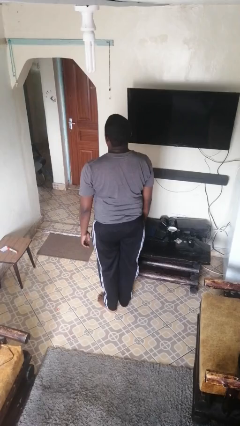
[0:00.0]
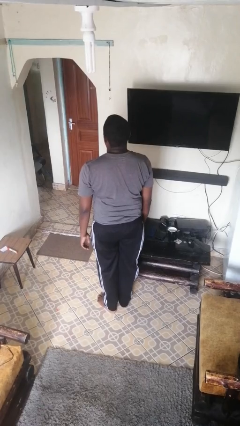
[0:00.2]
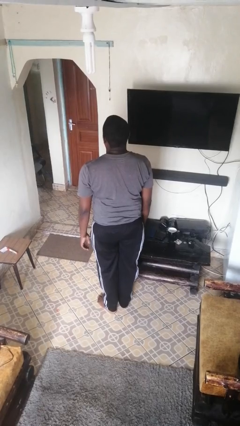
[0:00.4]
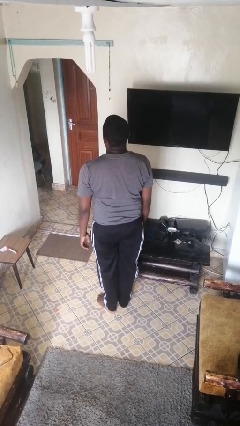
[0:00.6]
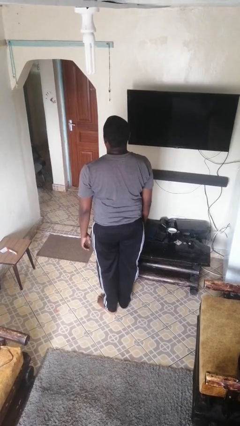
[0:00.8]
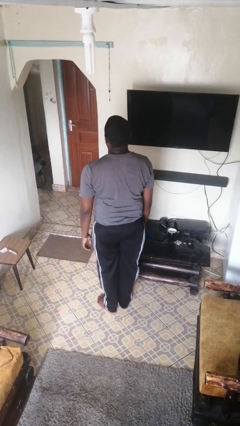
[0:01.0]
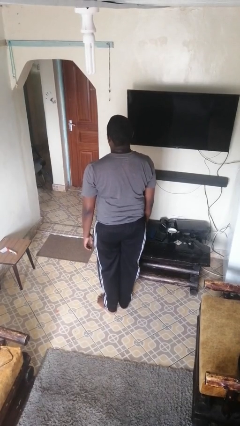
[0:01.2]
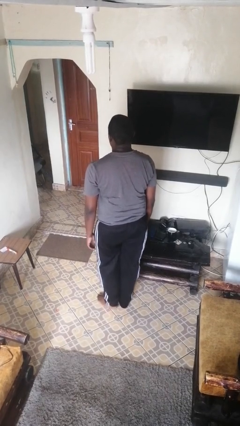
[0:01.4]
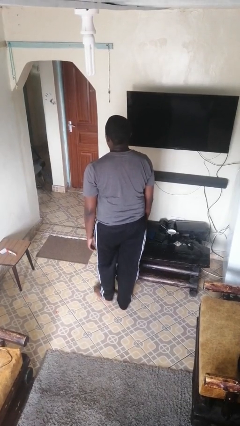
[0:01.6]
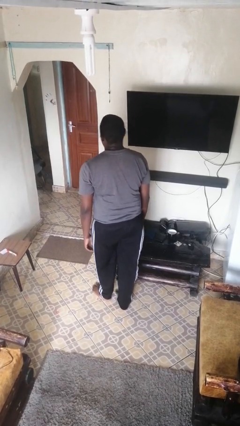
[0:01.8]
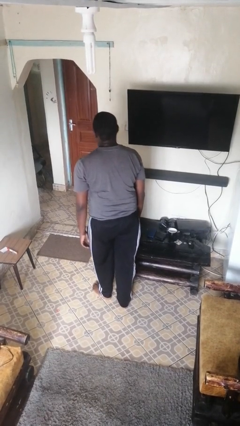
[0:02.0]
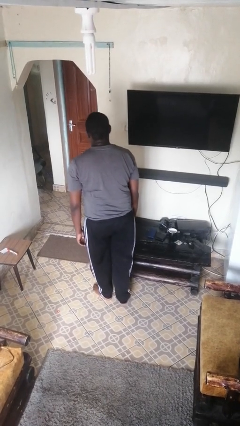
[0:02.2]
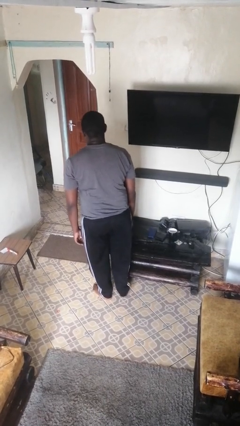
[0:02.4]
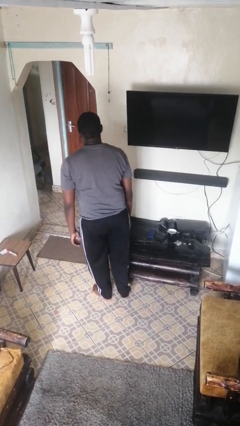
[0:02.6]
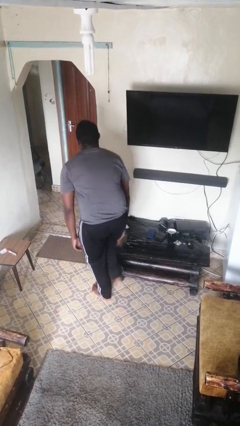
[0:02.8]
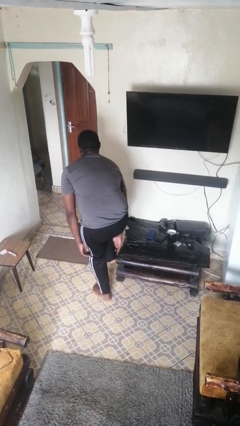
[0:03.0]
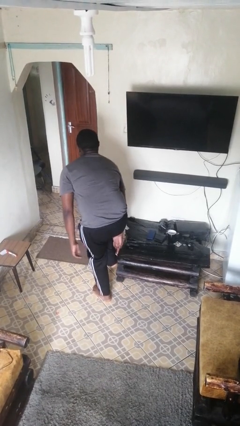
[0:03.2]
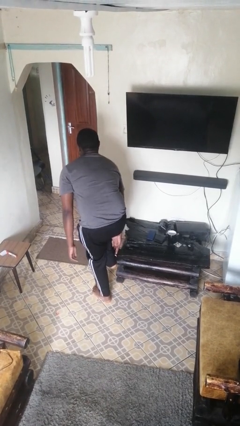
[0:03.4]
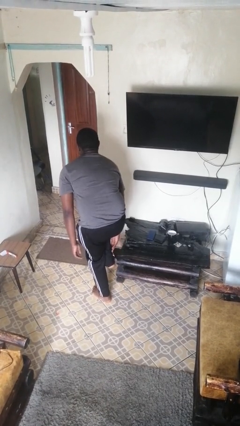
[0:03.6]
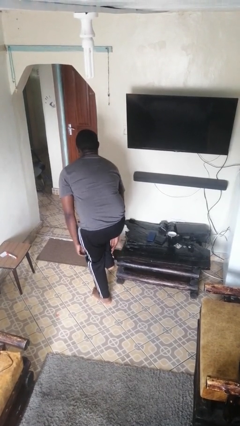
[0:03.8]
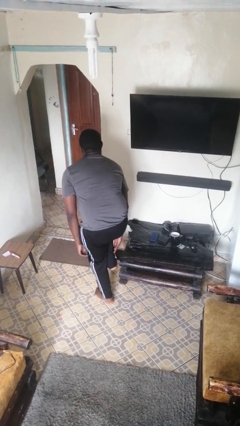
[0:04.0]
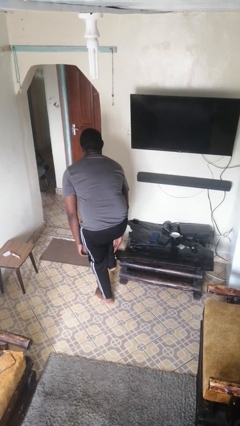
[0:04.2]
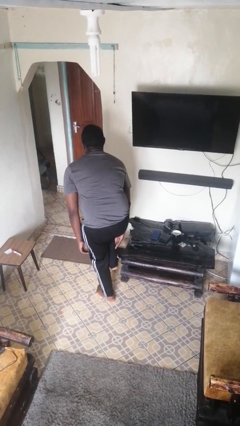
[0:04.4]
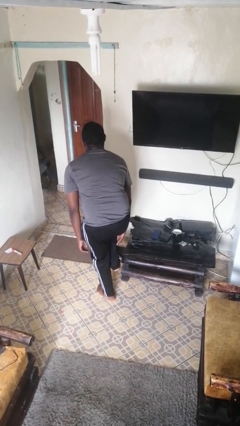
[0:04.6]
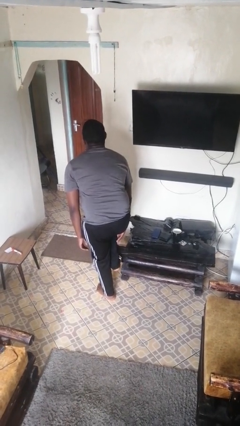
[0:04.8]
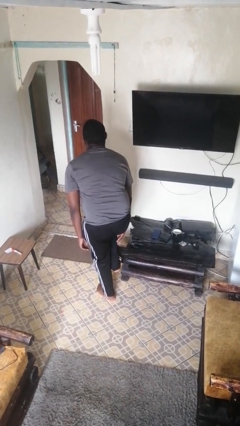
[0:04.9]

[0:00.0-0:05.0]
person bumps into table

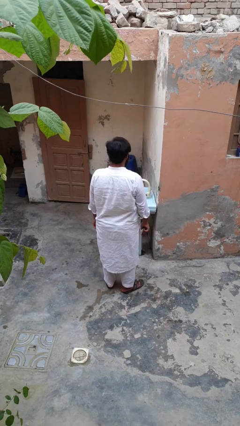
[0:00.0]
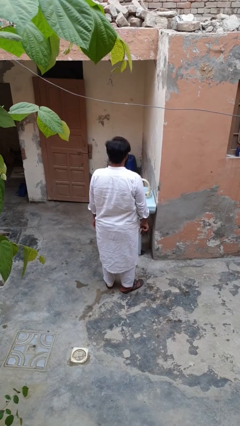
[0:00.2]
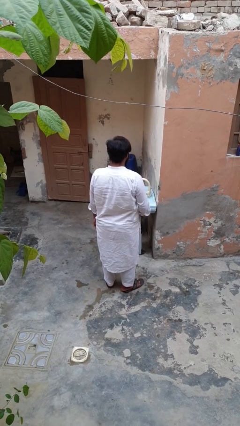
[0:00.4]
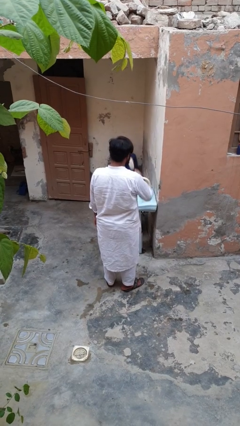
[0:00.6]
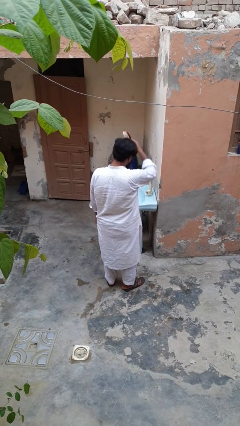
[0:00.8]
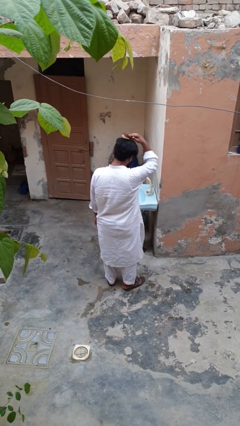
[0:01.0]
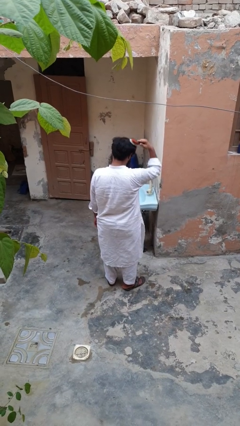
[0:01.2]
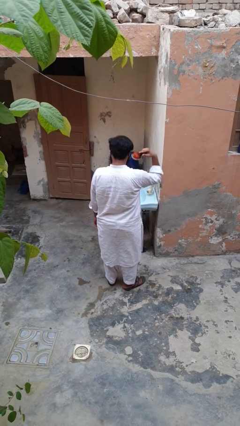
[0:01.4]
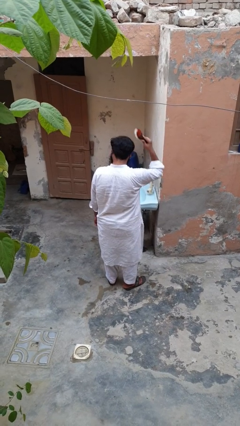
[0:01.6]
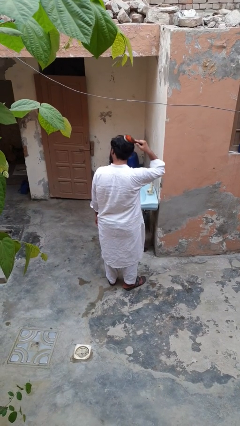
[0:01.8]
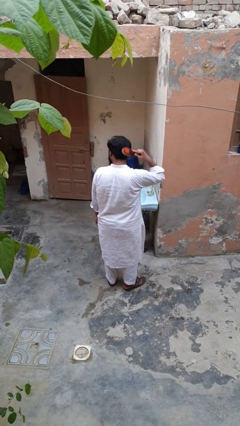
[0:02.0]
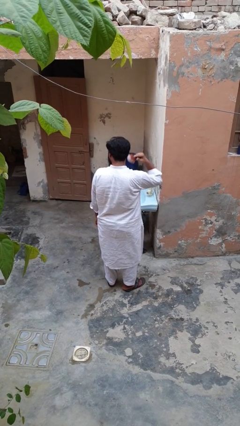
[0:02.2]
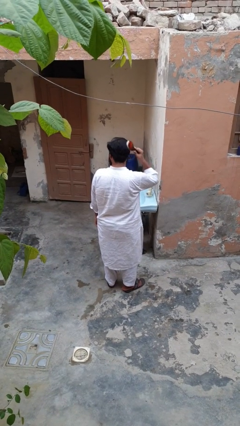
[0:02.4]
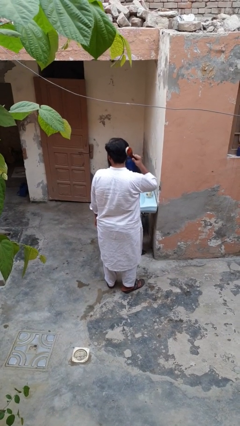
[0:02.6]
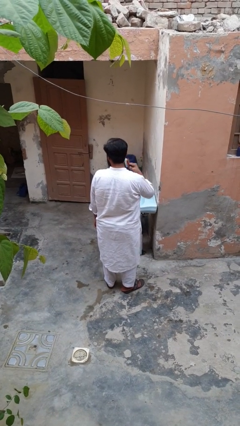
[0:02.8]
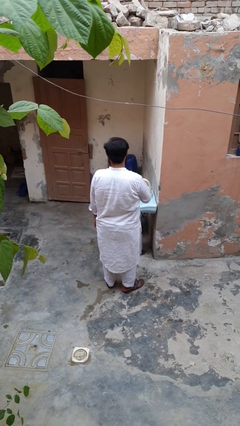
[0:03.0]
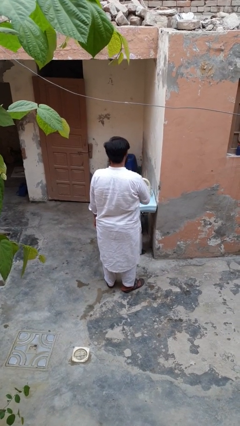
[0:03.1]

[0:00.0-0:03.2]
person brushes hair

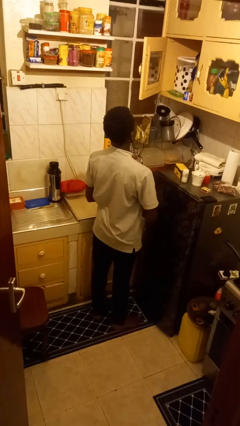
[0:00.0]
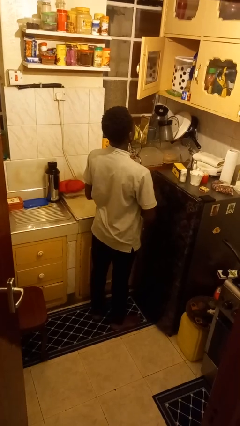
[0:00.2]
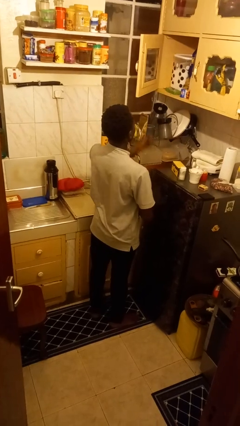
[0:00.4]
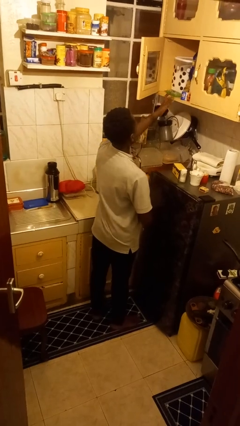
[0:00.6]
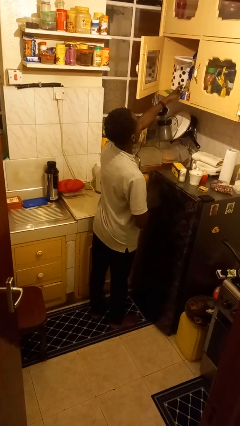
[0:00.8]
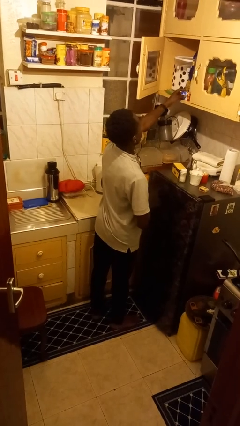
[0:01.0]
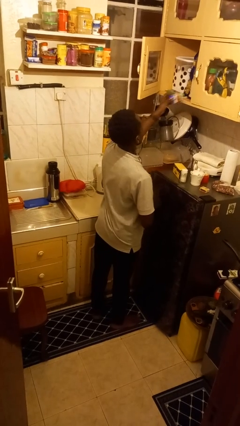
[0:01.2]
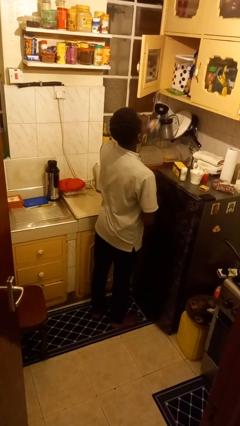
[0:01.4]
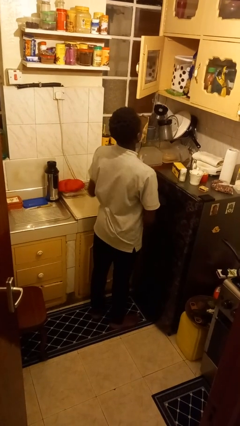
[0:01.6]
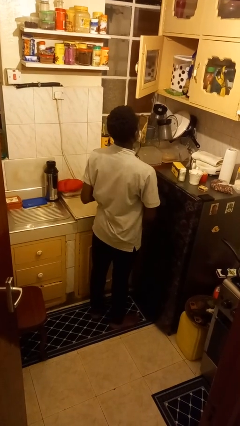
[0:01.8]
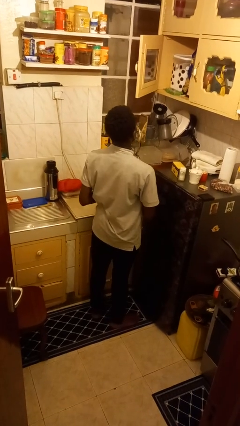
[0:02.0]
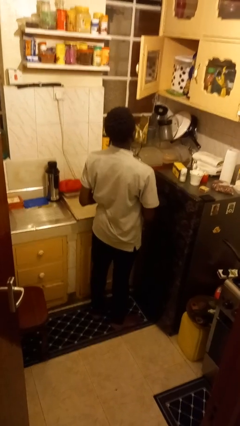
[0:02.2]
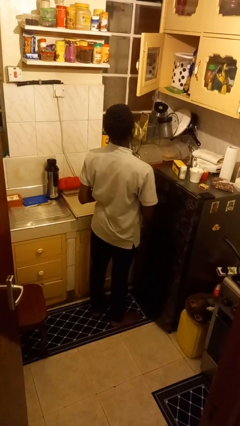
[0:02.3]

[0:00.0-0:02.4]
person picks up object from cabinet

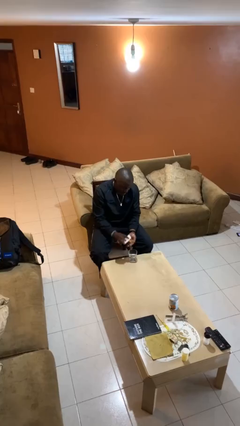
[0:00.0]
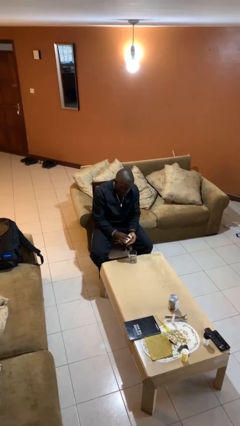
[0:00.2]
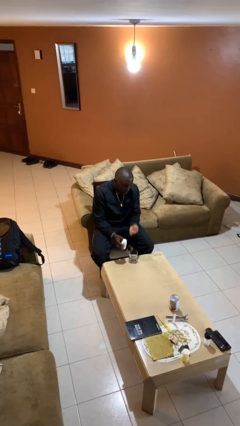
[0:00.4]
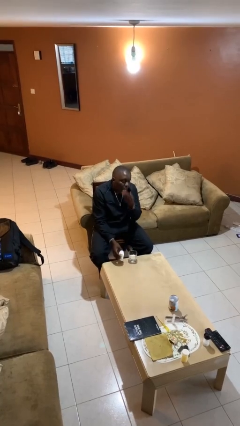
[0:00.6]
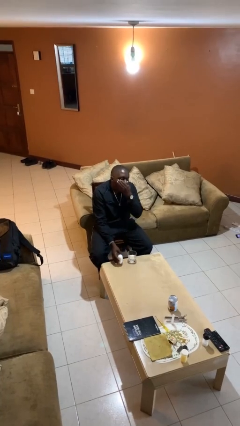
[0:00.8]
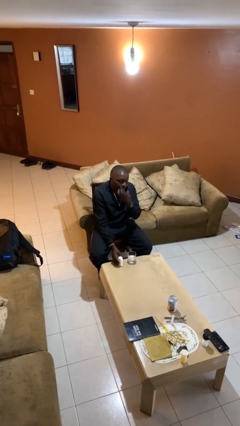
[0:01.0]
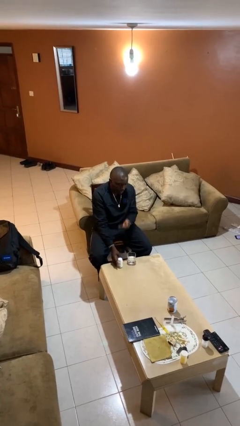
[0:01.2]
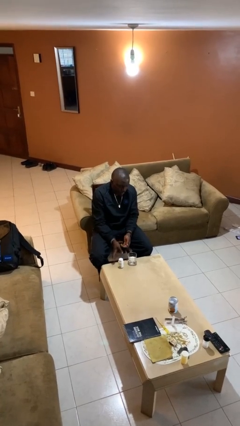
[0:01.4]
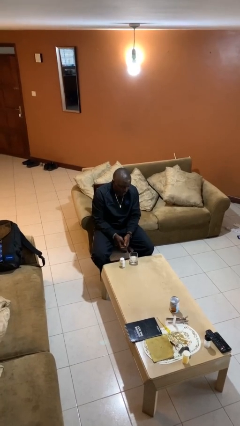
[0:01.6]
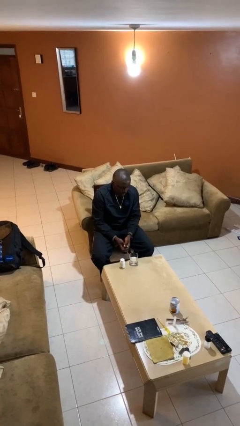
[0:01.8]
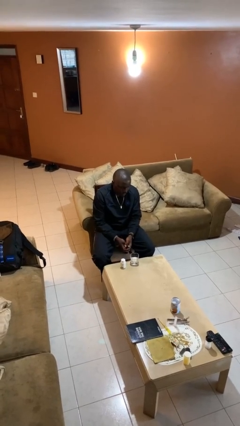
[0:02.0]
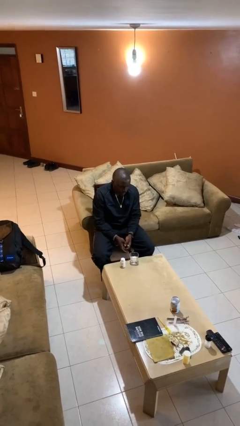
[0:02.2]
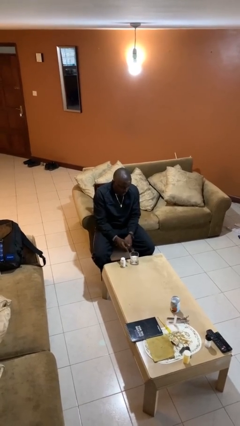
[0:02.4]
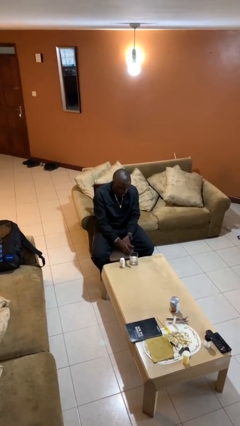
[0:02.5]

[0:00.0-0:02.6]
person takes medicine pills

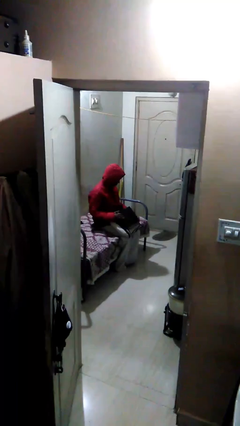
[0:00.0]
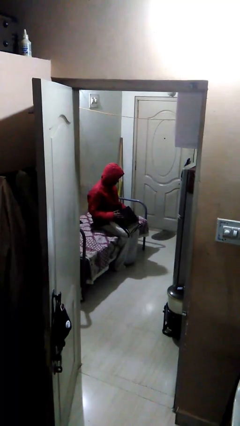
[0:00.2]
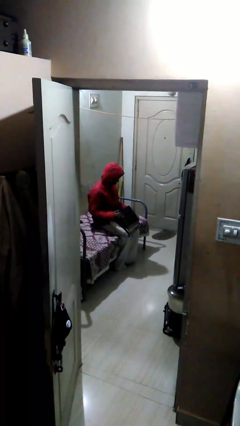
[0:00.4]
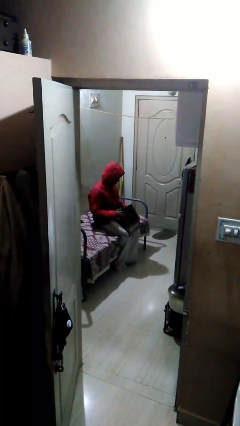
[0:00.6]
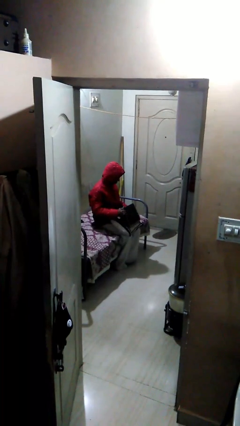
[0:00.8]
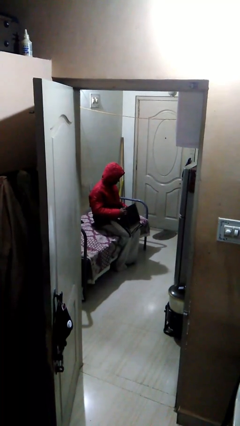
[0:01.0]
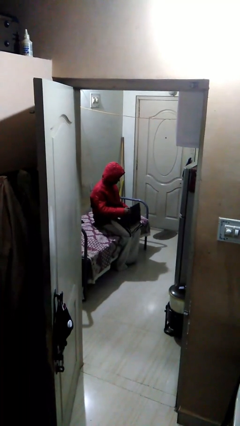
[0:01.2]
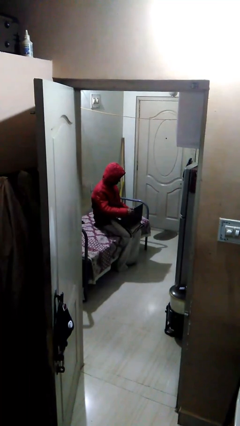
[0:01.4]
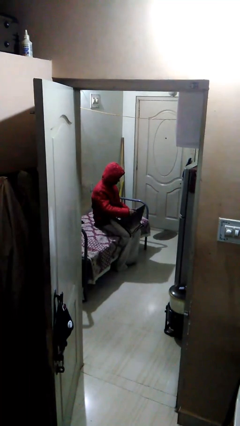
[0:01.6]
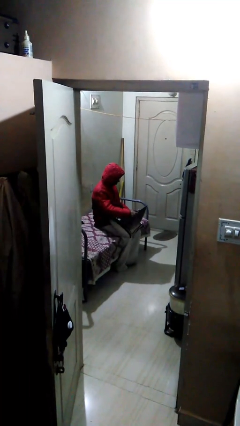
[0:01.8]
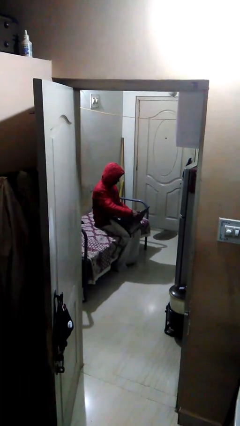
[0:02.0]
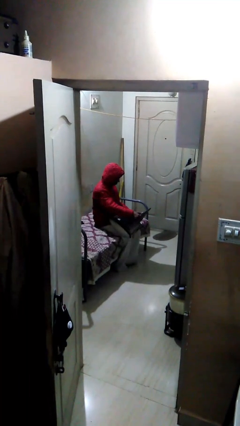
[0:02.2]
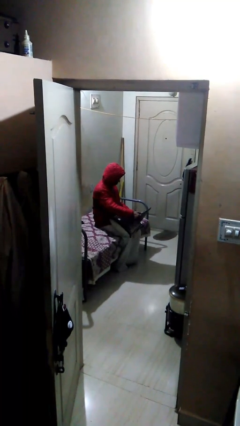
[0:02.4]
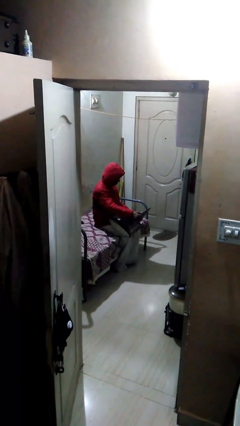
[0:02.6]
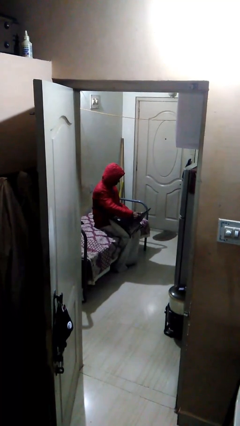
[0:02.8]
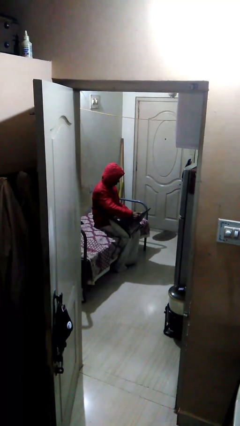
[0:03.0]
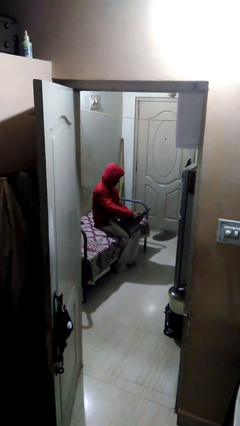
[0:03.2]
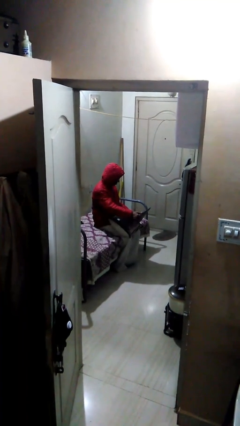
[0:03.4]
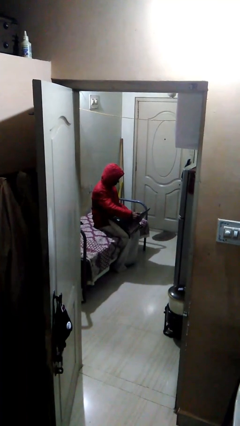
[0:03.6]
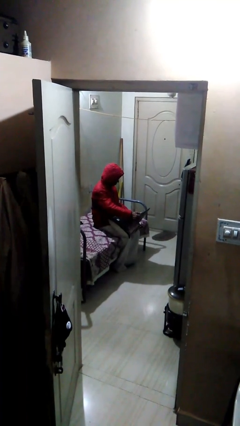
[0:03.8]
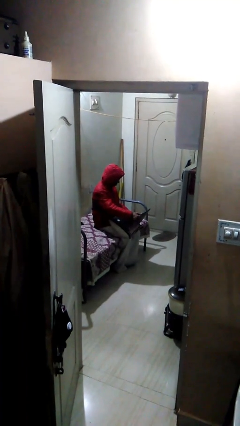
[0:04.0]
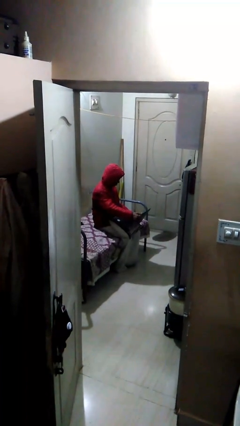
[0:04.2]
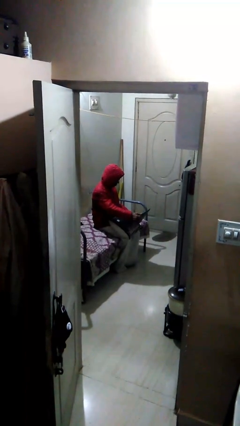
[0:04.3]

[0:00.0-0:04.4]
person interacts with laptop
